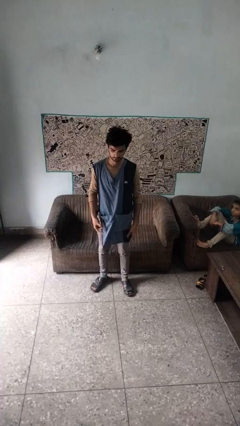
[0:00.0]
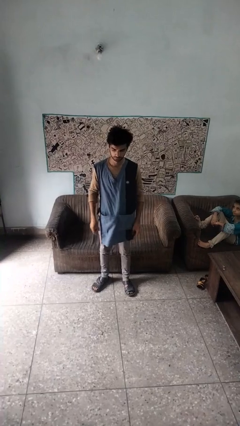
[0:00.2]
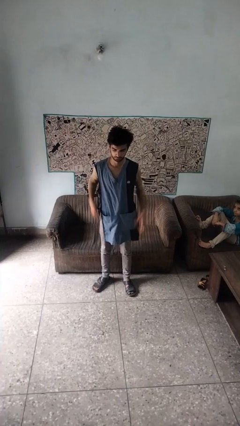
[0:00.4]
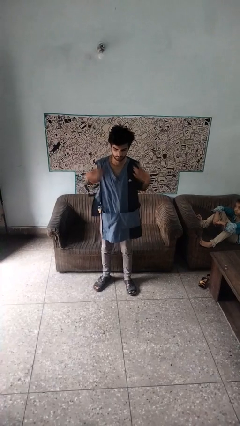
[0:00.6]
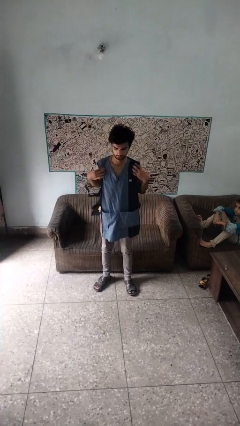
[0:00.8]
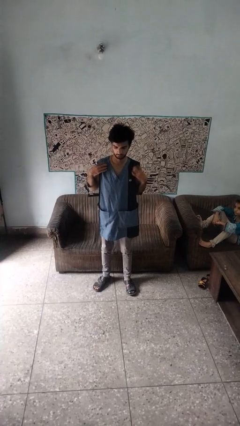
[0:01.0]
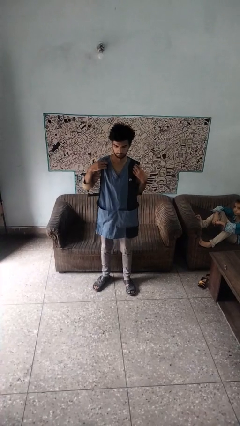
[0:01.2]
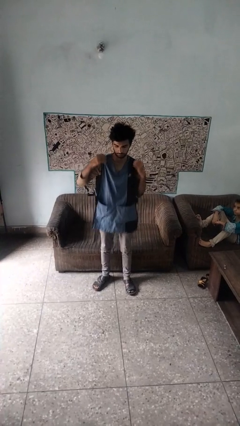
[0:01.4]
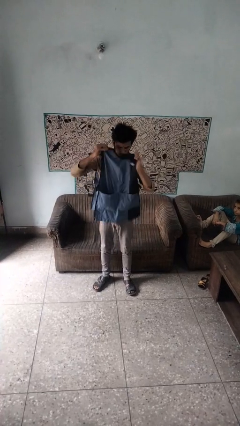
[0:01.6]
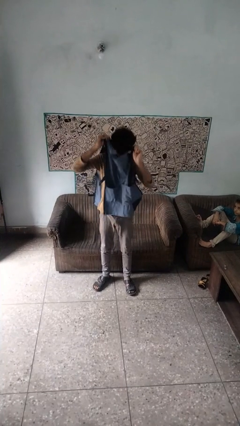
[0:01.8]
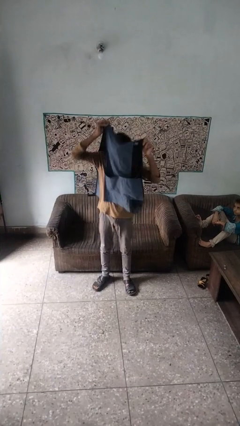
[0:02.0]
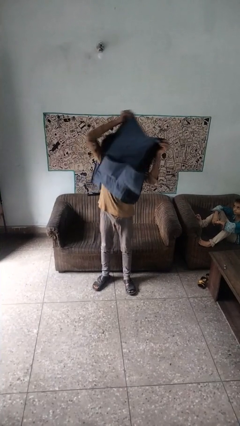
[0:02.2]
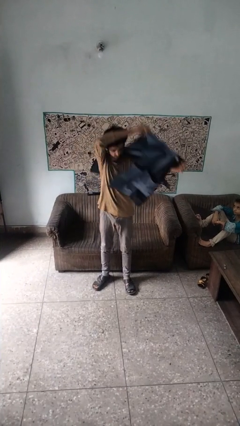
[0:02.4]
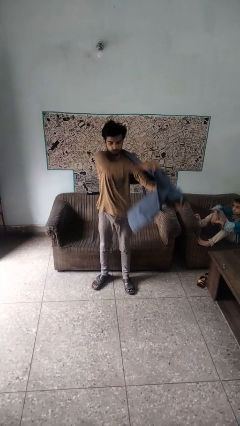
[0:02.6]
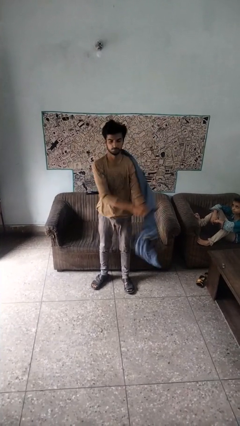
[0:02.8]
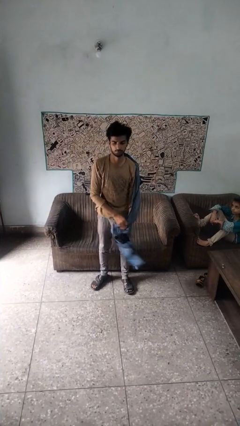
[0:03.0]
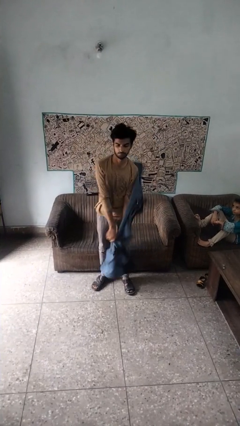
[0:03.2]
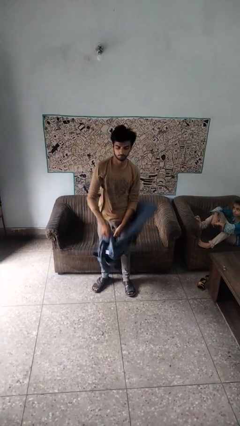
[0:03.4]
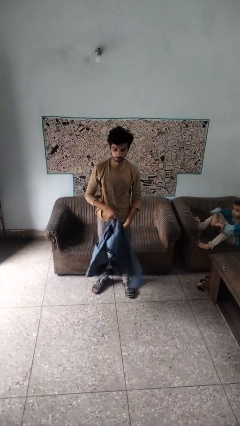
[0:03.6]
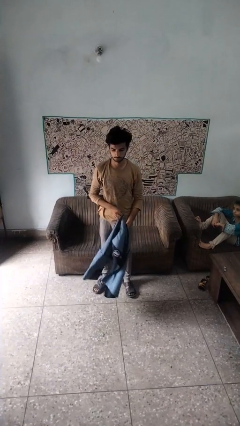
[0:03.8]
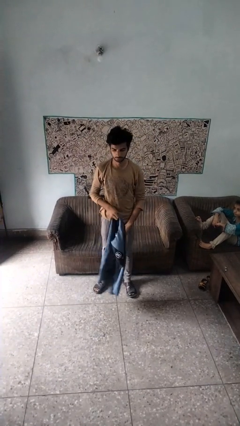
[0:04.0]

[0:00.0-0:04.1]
person takes off apron

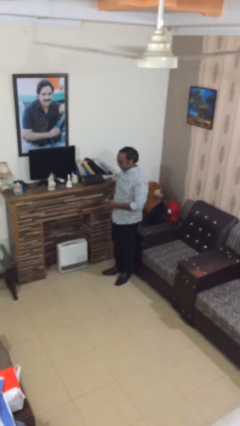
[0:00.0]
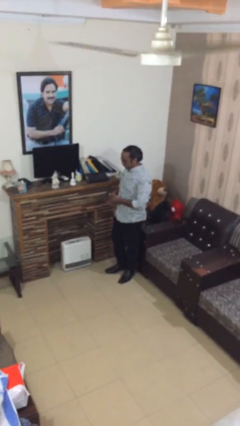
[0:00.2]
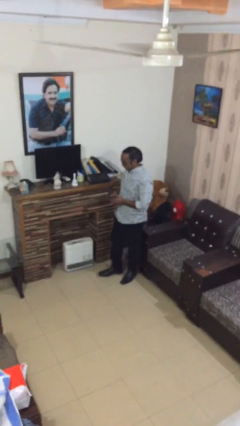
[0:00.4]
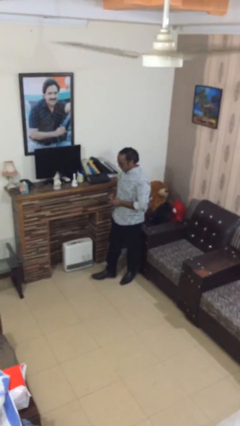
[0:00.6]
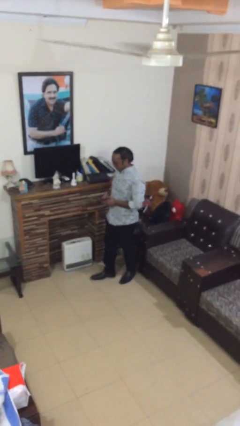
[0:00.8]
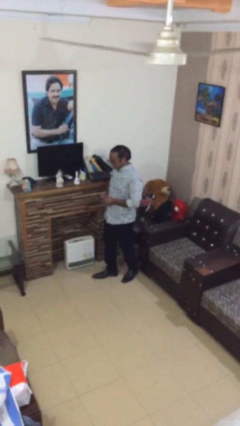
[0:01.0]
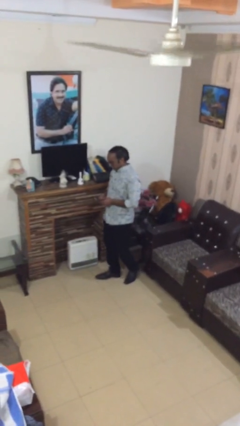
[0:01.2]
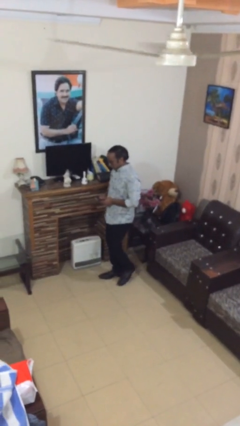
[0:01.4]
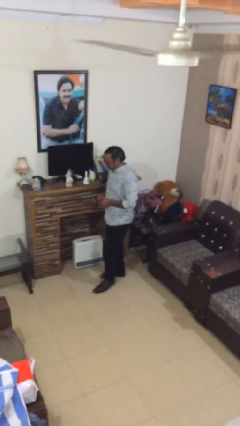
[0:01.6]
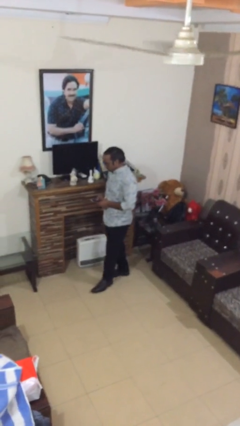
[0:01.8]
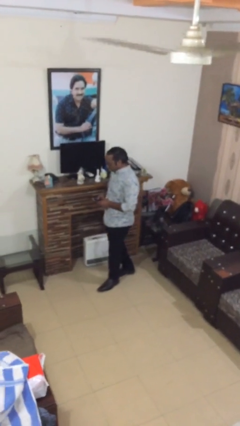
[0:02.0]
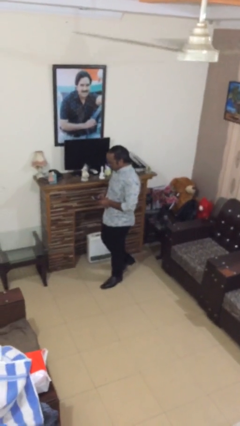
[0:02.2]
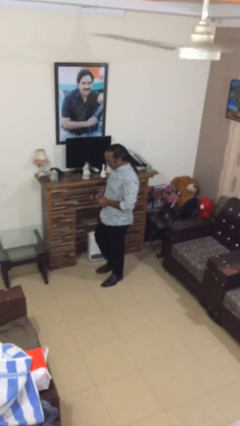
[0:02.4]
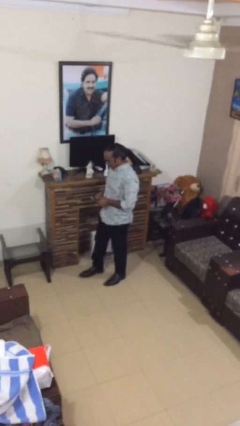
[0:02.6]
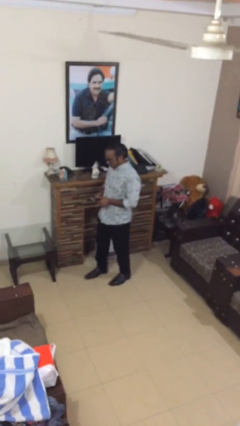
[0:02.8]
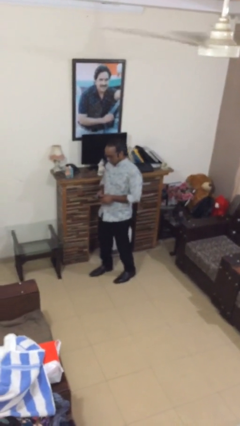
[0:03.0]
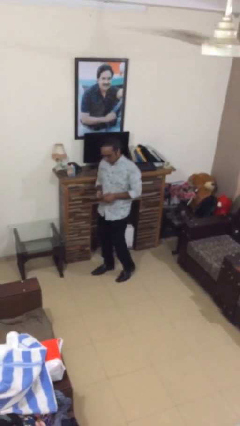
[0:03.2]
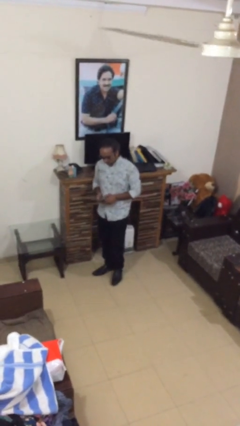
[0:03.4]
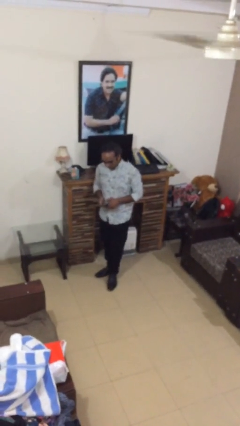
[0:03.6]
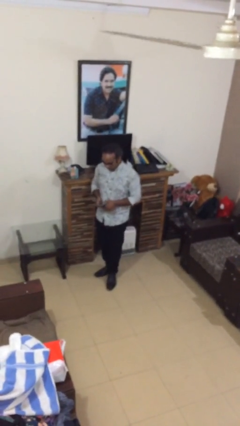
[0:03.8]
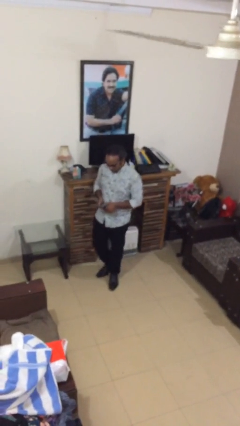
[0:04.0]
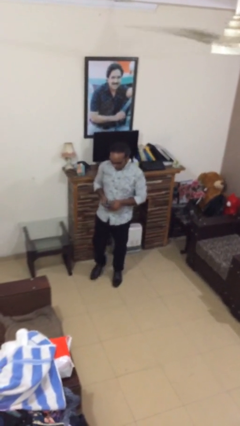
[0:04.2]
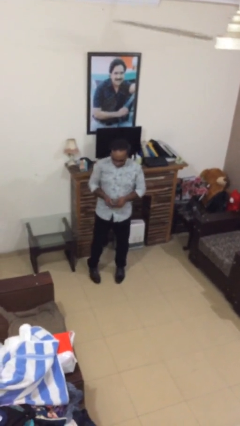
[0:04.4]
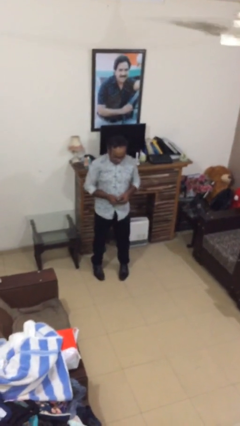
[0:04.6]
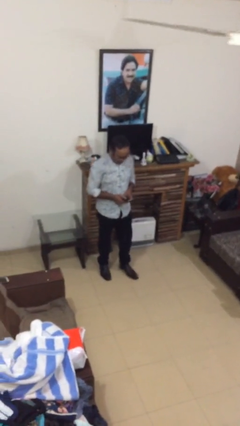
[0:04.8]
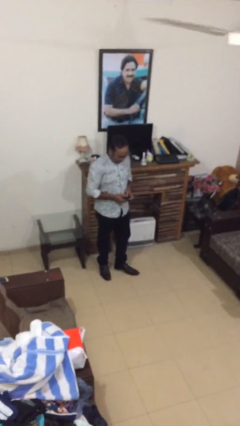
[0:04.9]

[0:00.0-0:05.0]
person texts on phone

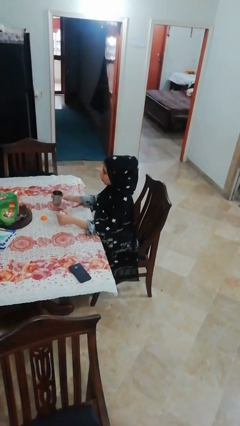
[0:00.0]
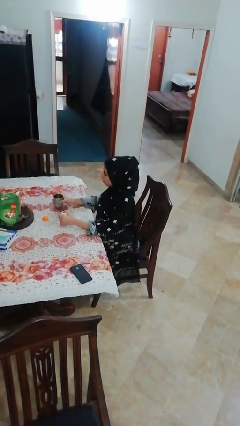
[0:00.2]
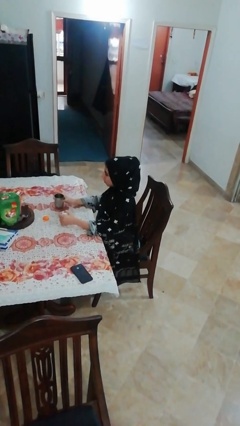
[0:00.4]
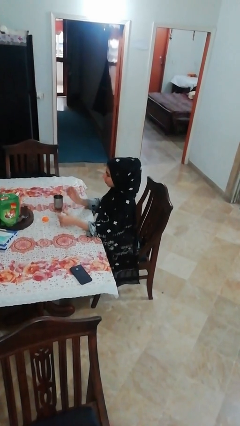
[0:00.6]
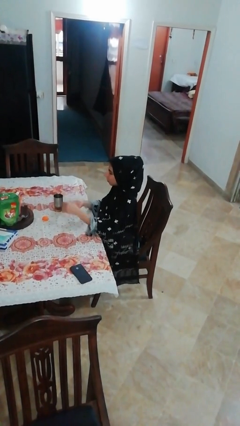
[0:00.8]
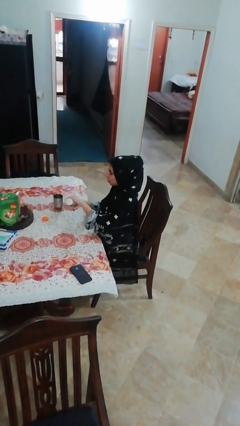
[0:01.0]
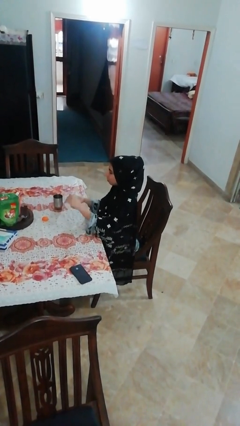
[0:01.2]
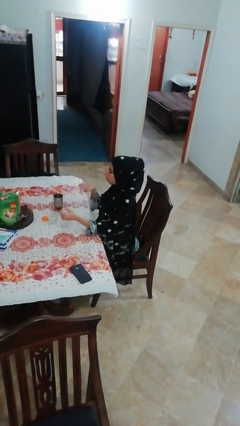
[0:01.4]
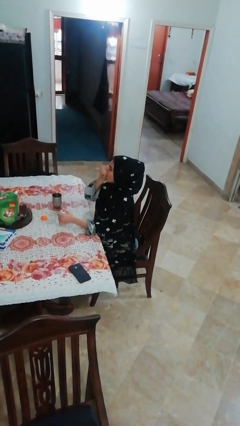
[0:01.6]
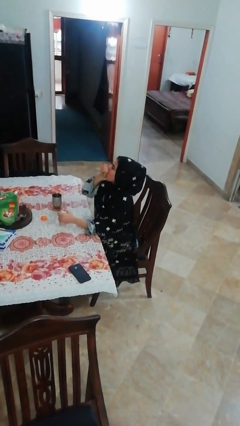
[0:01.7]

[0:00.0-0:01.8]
person takes medicine pills

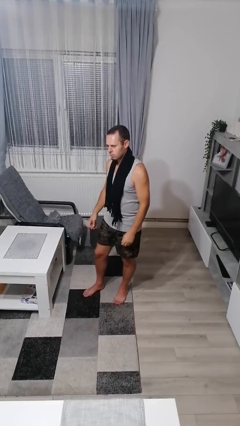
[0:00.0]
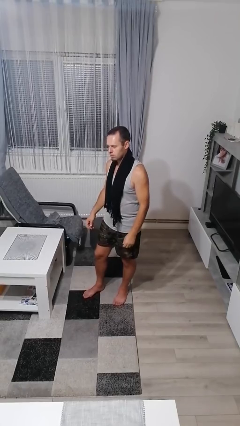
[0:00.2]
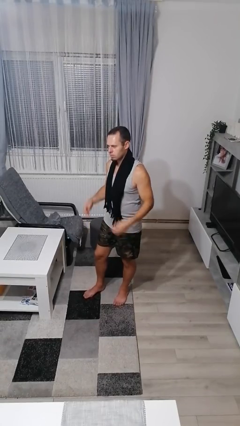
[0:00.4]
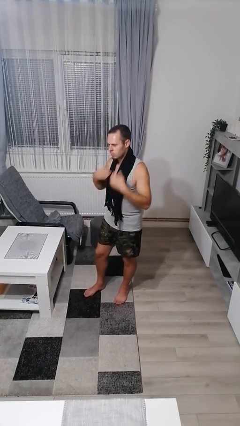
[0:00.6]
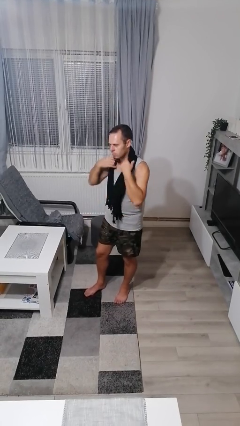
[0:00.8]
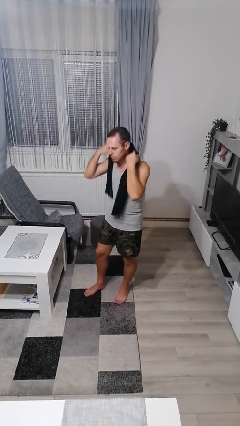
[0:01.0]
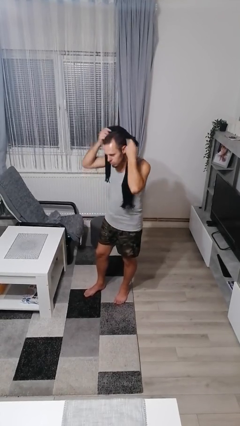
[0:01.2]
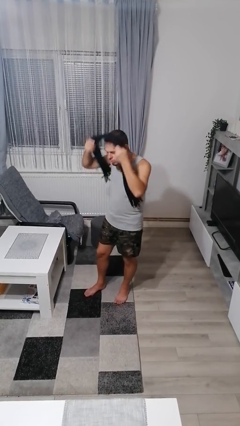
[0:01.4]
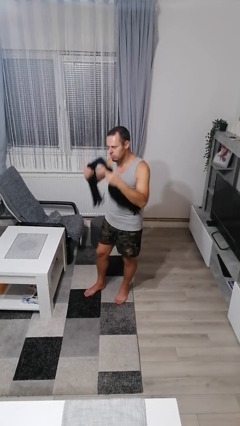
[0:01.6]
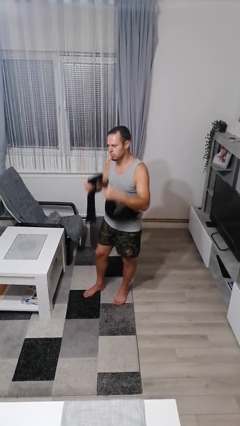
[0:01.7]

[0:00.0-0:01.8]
person takes off scarf

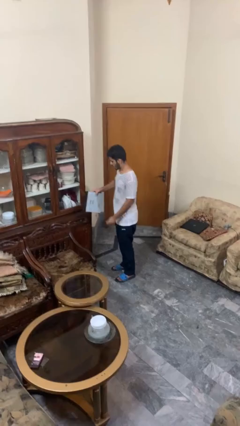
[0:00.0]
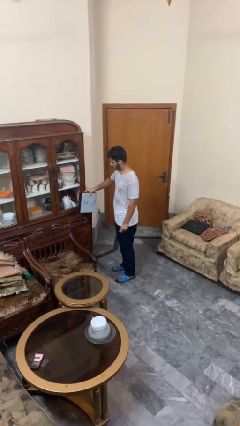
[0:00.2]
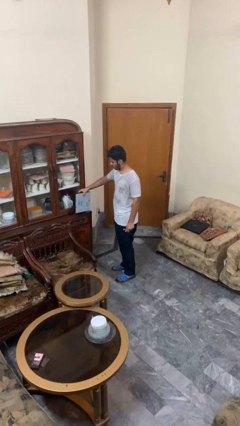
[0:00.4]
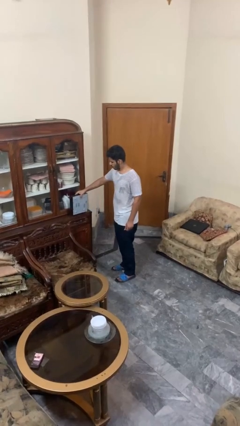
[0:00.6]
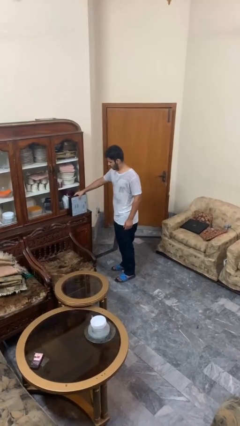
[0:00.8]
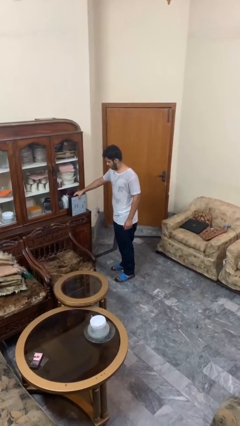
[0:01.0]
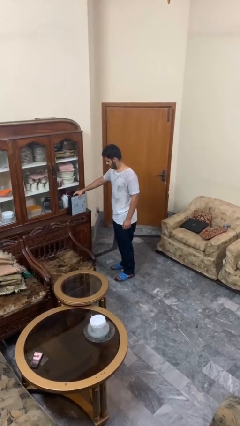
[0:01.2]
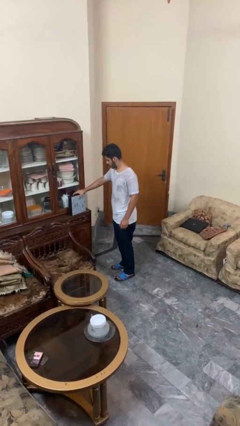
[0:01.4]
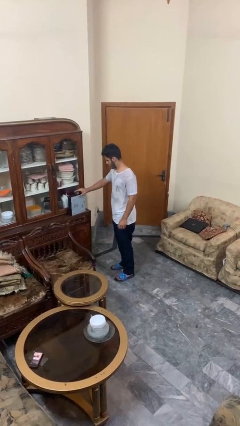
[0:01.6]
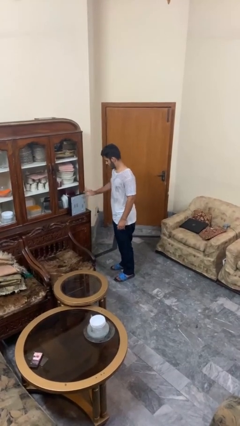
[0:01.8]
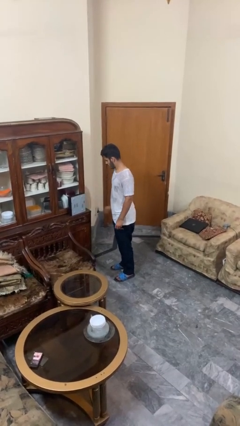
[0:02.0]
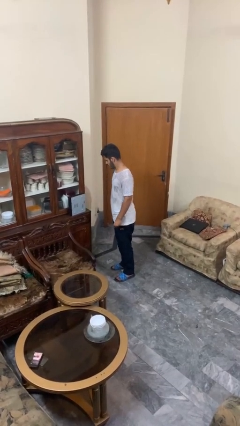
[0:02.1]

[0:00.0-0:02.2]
person puts down object on countertop

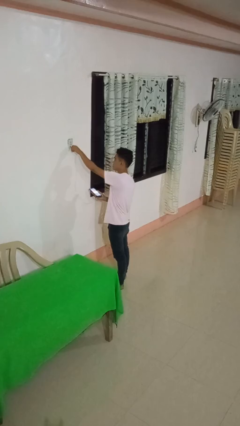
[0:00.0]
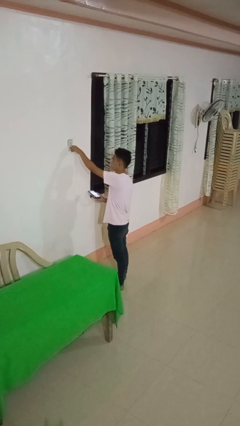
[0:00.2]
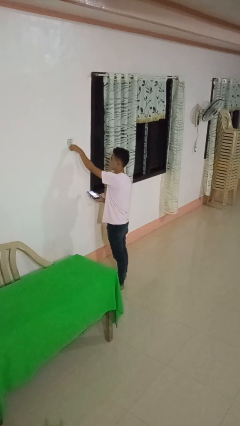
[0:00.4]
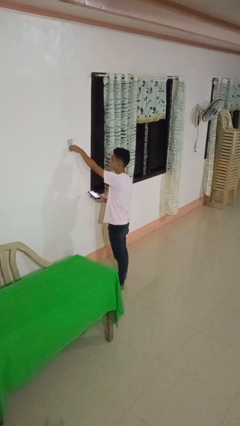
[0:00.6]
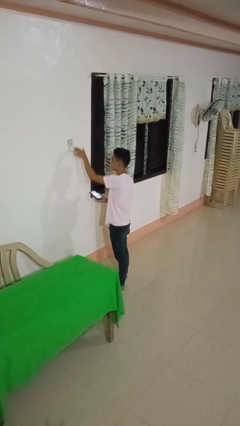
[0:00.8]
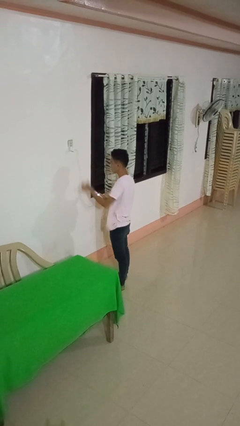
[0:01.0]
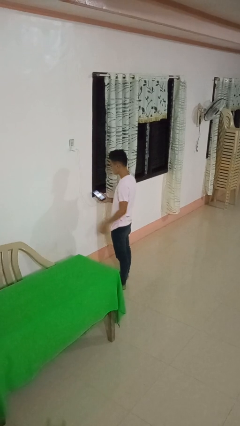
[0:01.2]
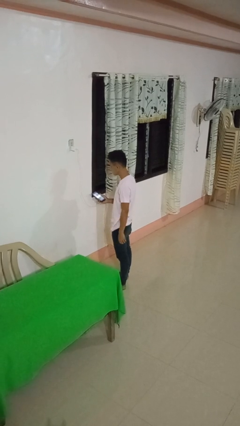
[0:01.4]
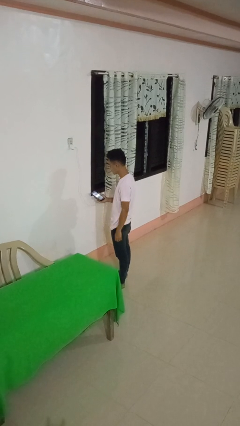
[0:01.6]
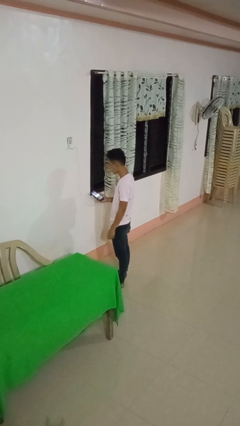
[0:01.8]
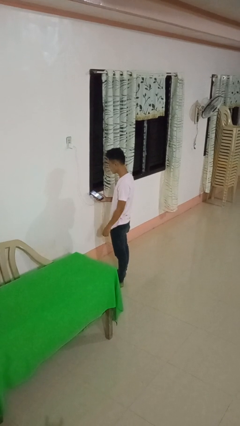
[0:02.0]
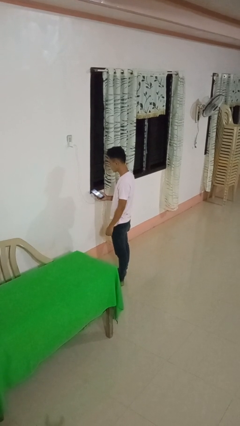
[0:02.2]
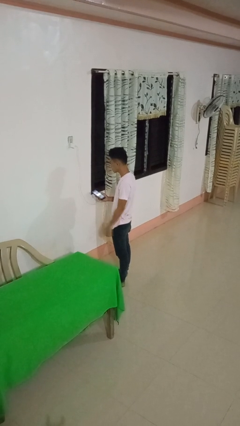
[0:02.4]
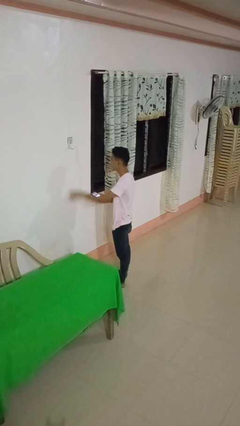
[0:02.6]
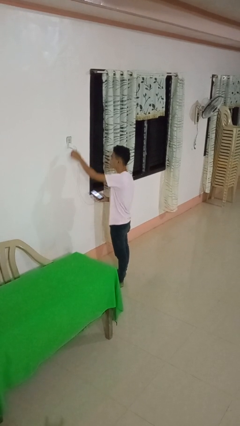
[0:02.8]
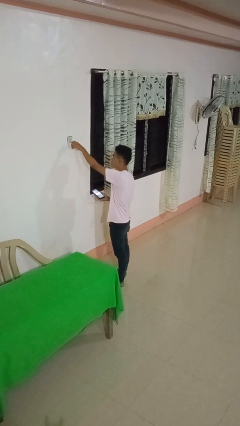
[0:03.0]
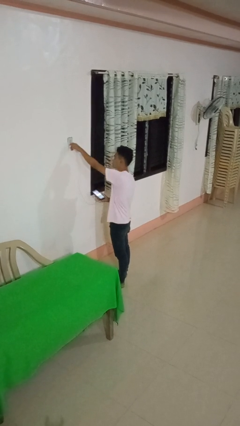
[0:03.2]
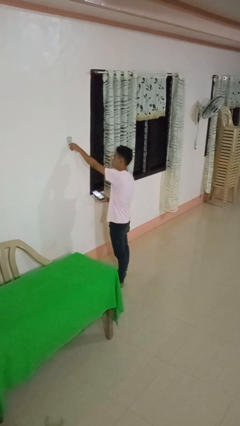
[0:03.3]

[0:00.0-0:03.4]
person plugs into electrical socket
